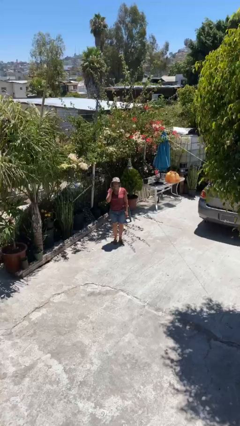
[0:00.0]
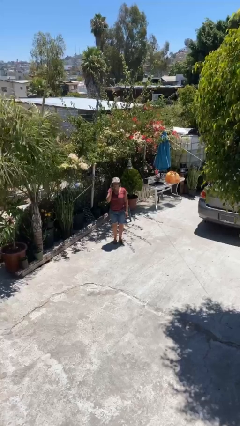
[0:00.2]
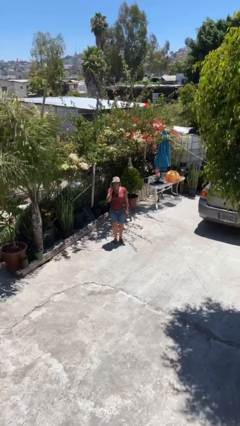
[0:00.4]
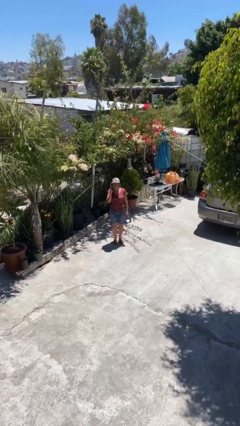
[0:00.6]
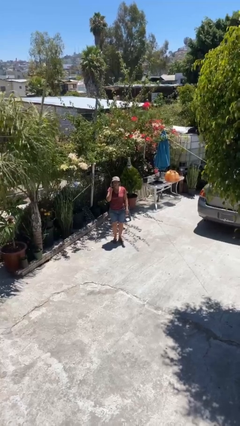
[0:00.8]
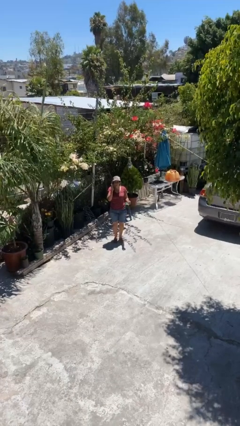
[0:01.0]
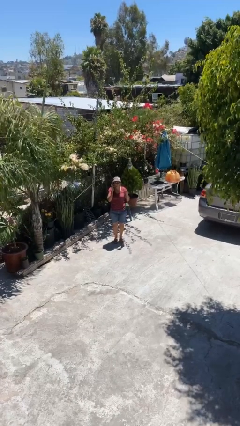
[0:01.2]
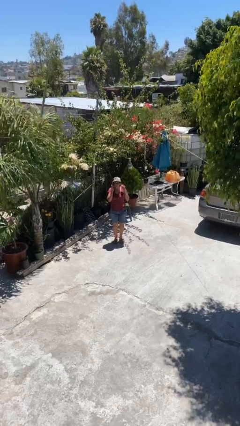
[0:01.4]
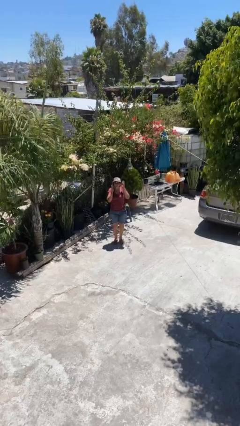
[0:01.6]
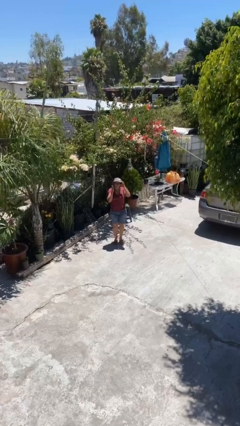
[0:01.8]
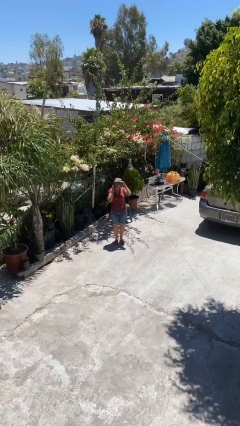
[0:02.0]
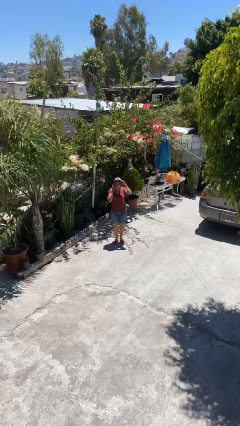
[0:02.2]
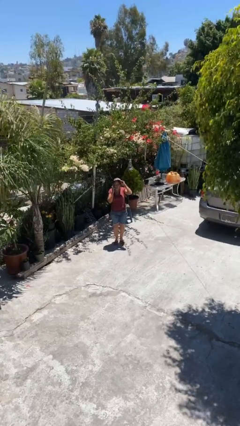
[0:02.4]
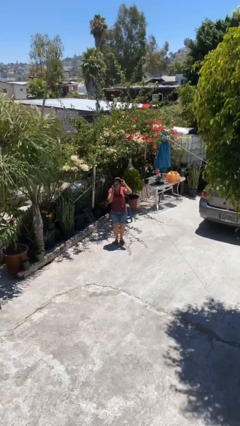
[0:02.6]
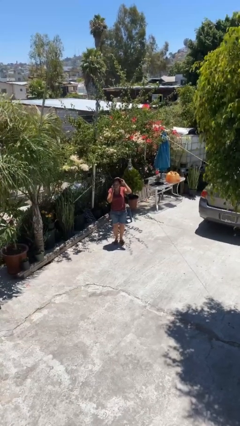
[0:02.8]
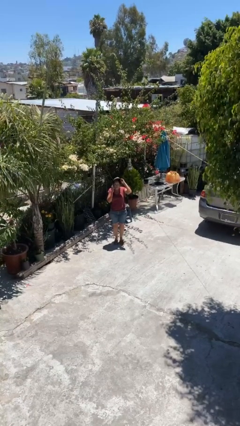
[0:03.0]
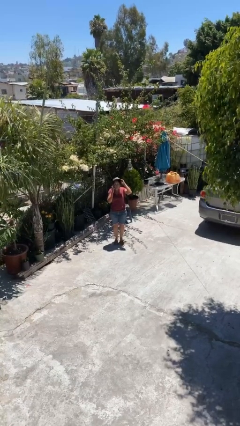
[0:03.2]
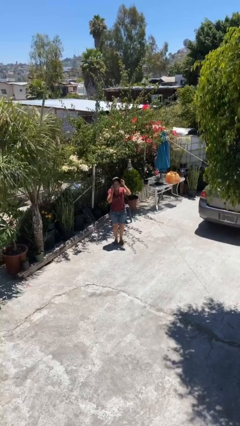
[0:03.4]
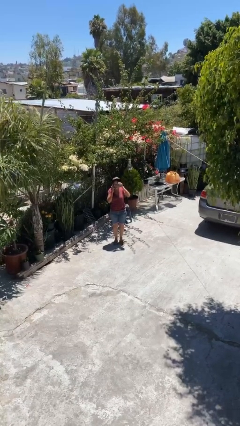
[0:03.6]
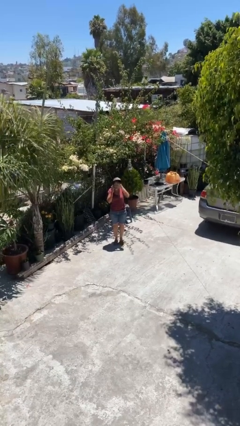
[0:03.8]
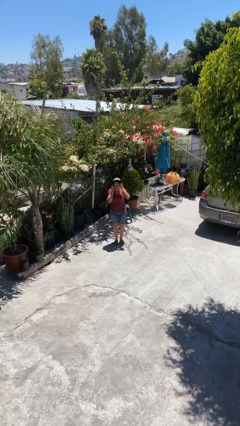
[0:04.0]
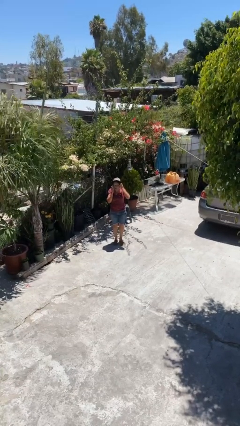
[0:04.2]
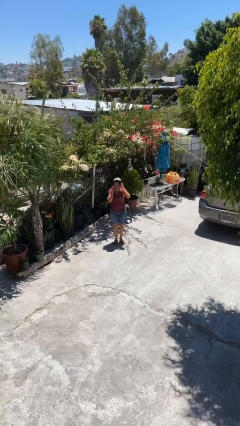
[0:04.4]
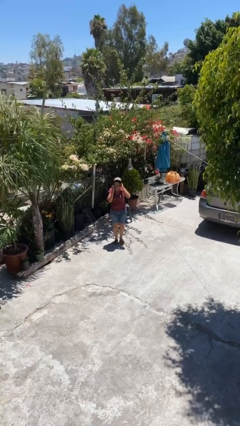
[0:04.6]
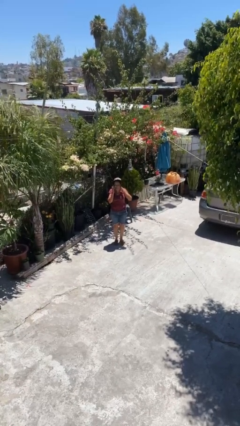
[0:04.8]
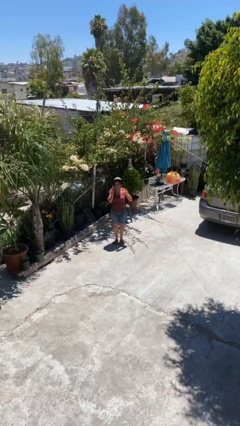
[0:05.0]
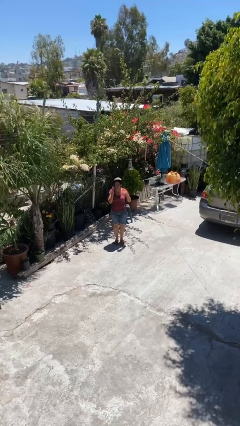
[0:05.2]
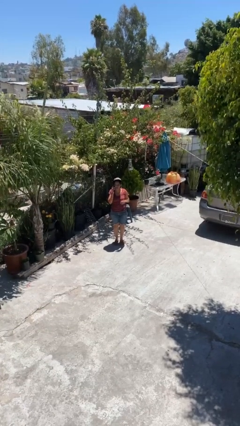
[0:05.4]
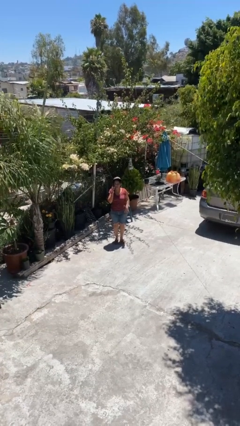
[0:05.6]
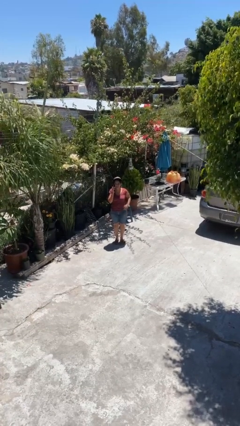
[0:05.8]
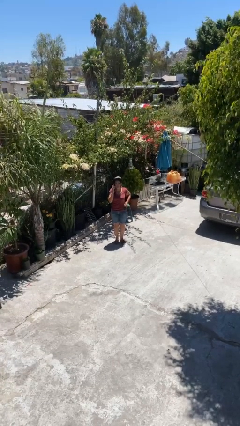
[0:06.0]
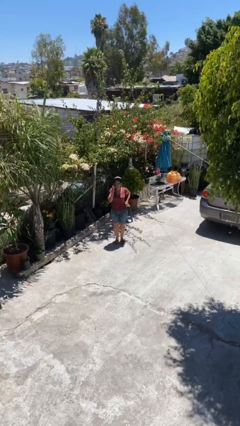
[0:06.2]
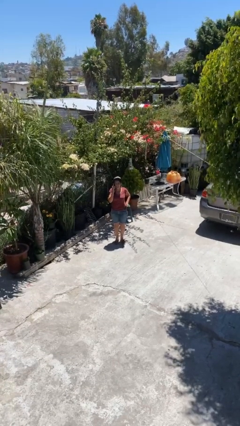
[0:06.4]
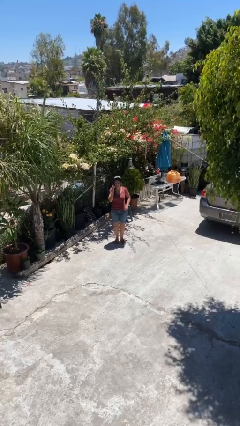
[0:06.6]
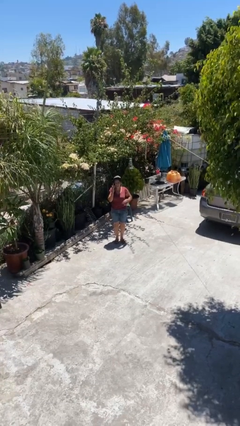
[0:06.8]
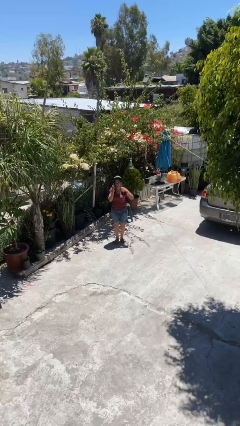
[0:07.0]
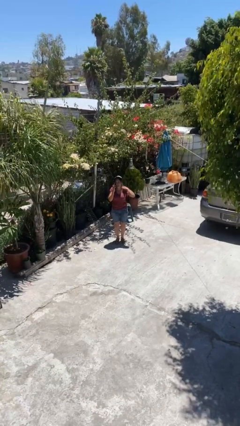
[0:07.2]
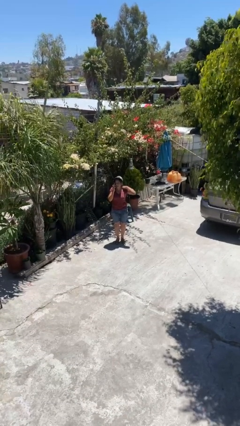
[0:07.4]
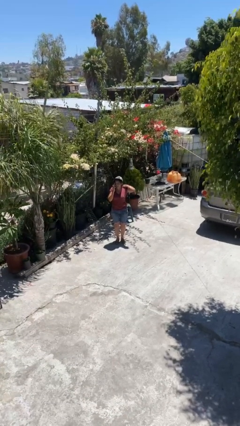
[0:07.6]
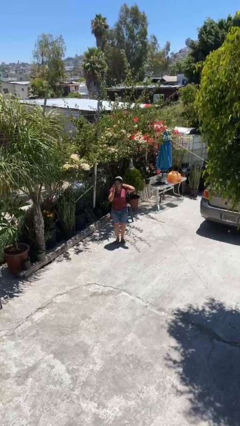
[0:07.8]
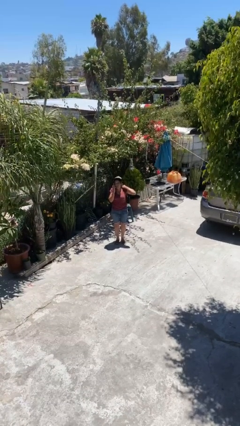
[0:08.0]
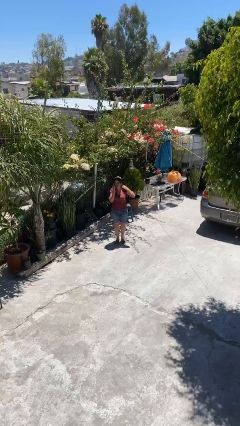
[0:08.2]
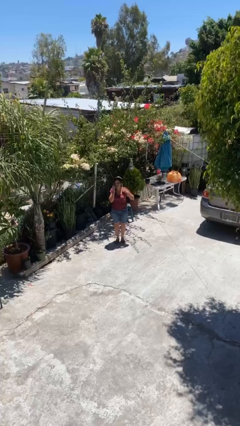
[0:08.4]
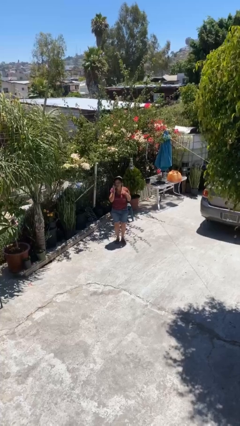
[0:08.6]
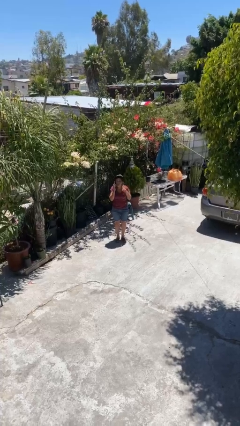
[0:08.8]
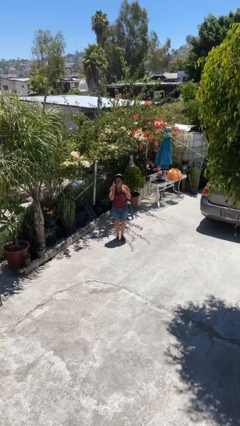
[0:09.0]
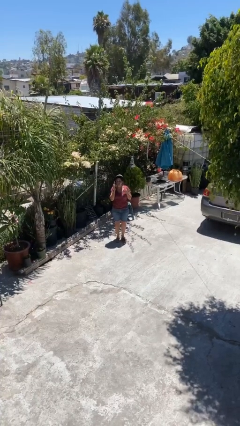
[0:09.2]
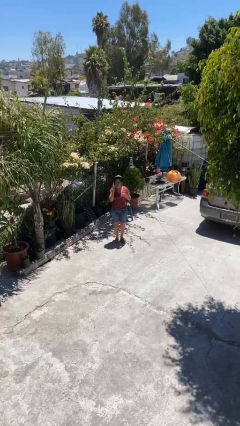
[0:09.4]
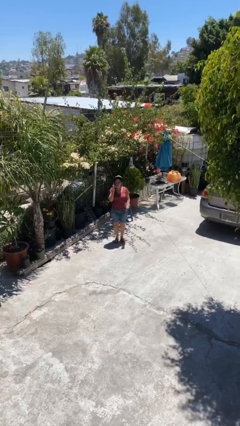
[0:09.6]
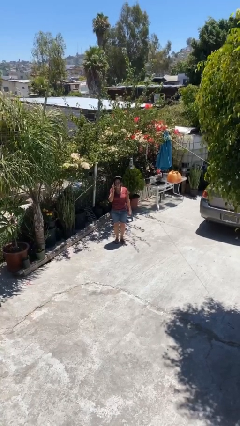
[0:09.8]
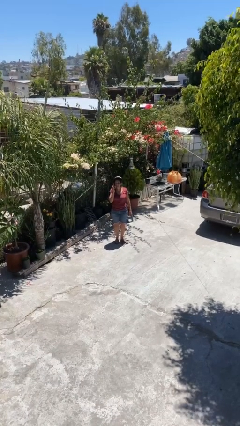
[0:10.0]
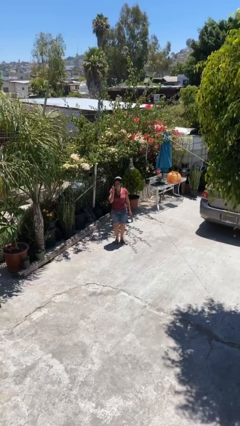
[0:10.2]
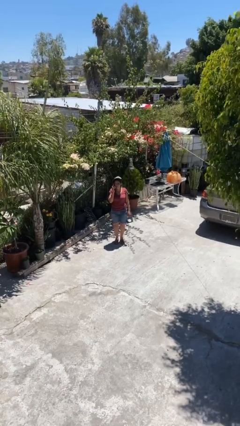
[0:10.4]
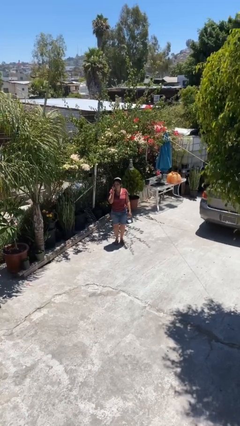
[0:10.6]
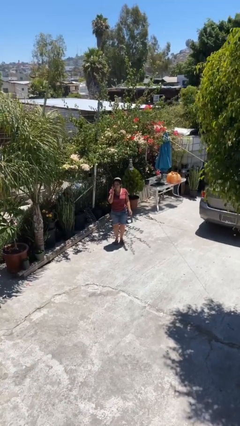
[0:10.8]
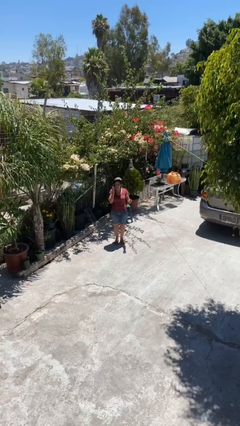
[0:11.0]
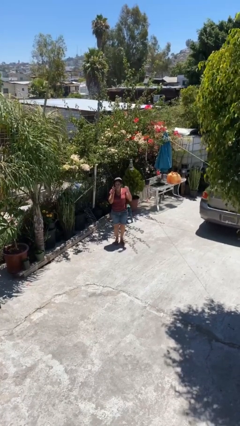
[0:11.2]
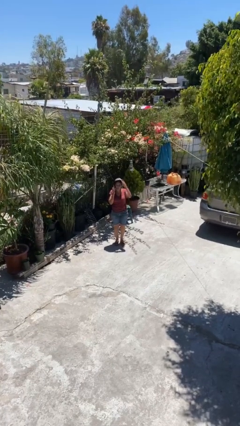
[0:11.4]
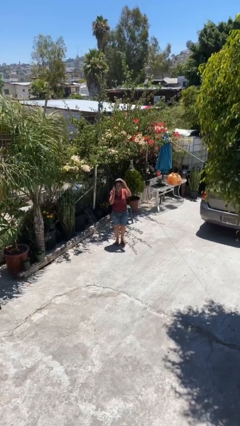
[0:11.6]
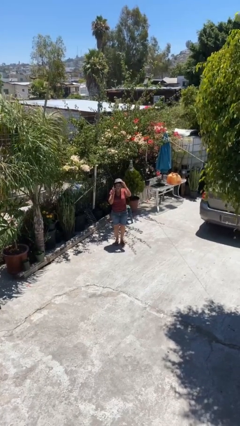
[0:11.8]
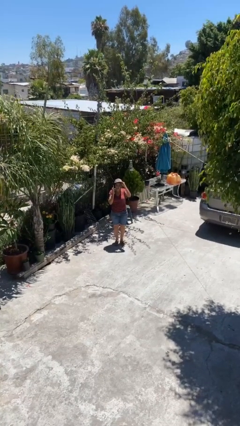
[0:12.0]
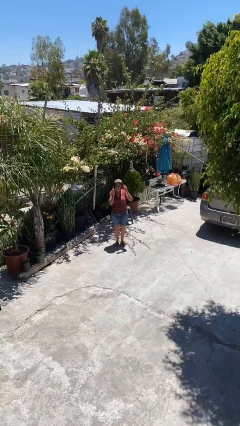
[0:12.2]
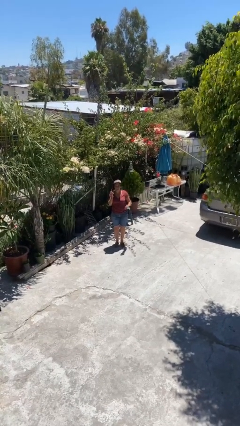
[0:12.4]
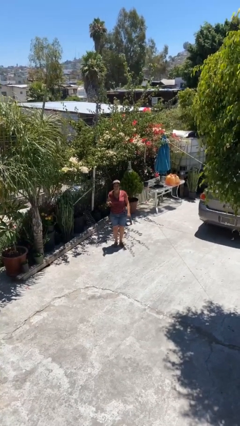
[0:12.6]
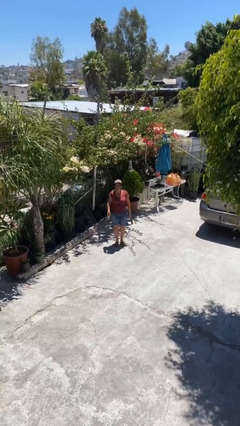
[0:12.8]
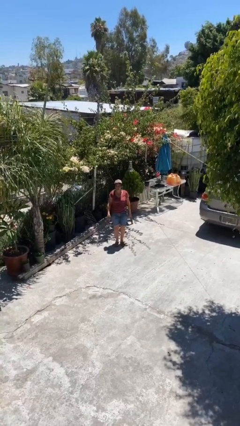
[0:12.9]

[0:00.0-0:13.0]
person talks on phone

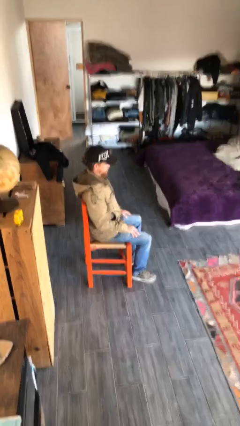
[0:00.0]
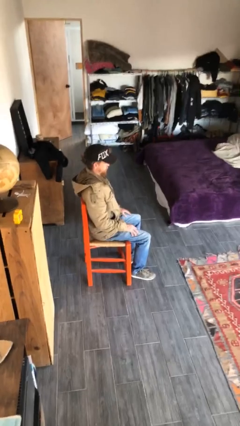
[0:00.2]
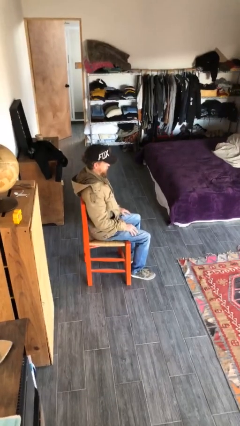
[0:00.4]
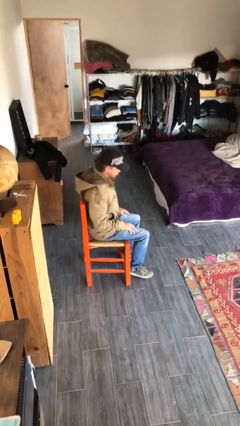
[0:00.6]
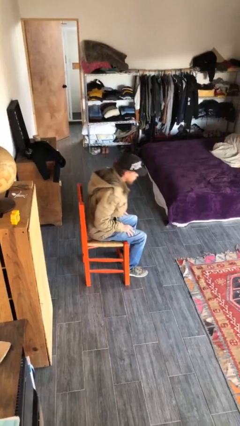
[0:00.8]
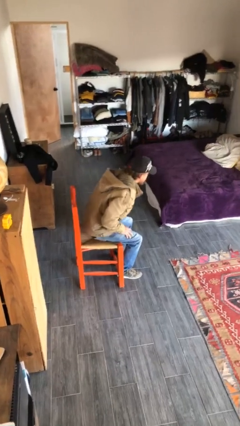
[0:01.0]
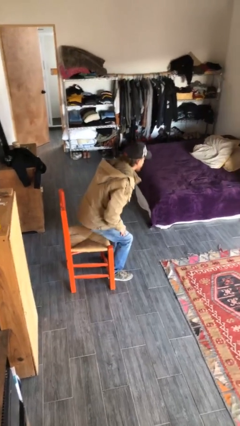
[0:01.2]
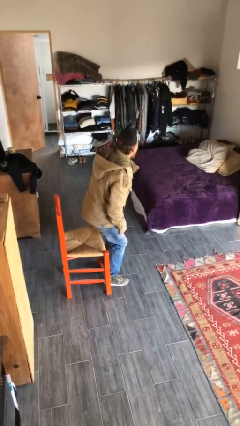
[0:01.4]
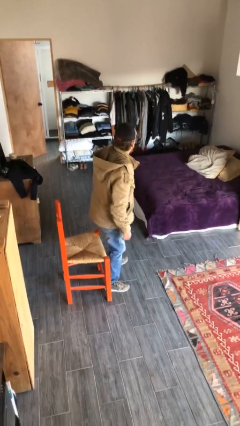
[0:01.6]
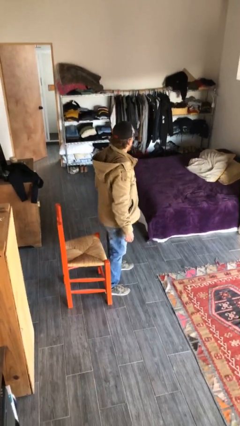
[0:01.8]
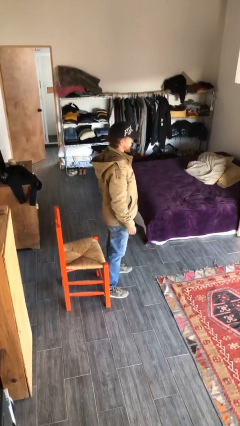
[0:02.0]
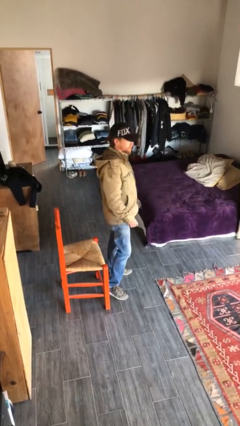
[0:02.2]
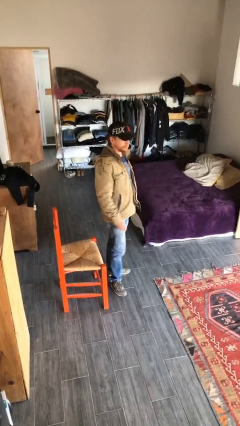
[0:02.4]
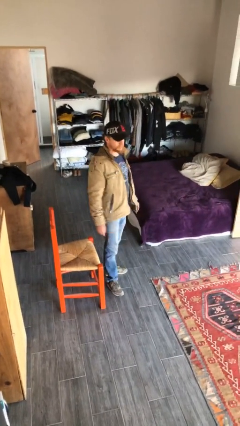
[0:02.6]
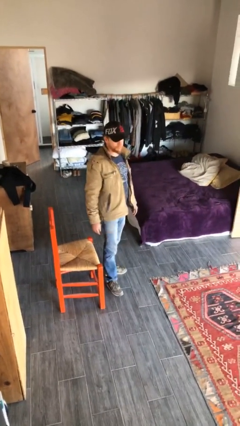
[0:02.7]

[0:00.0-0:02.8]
person stands up

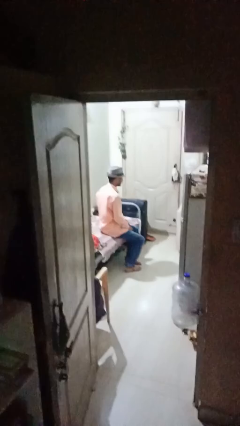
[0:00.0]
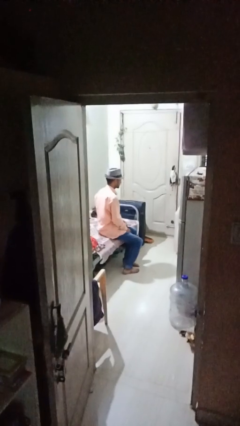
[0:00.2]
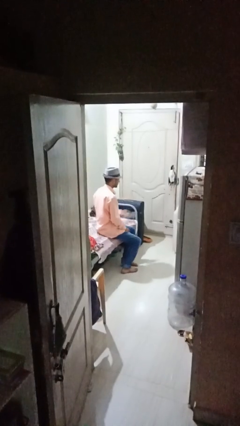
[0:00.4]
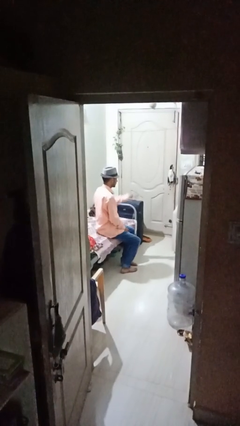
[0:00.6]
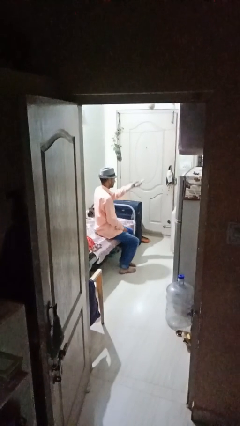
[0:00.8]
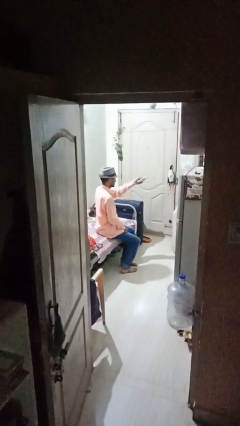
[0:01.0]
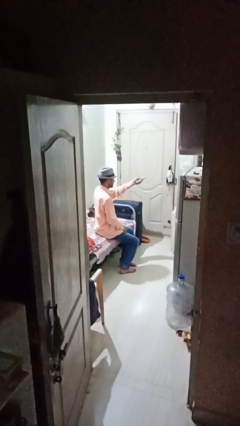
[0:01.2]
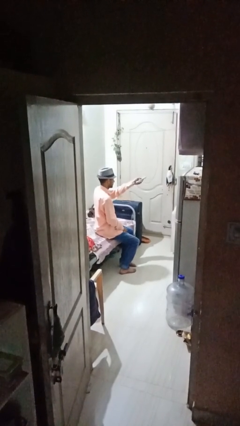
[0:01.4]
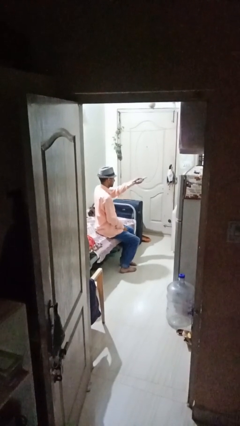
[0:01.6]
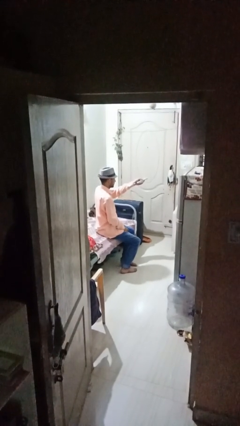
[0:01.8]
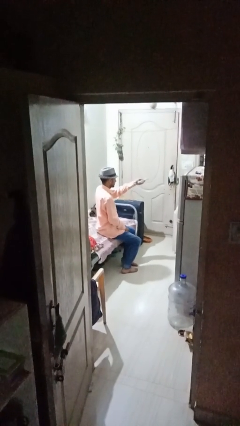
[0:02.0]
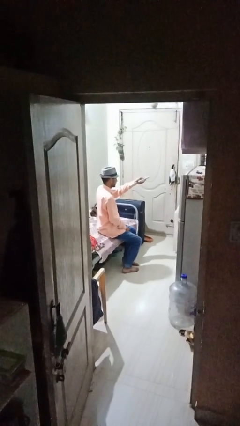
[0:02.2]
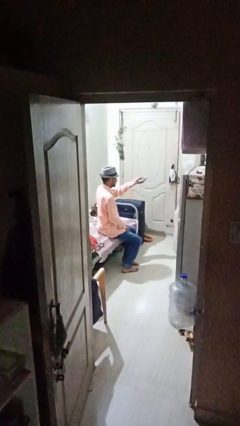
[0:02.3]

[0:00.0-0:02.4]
person uses television remote
